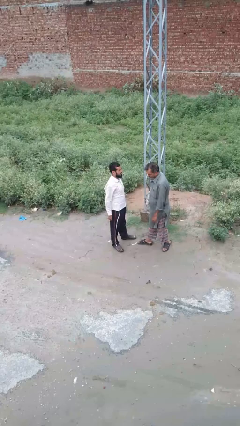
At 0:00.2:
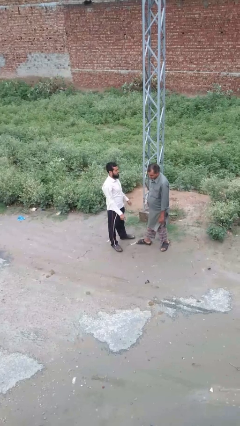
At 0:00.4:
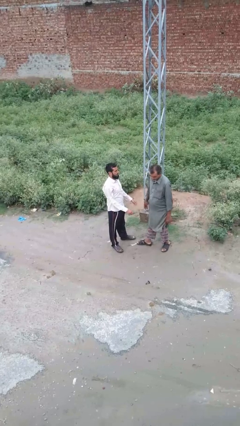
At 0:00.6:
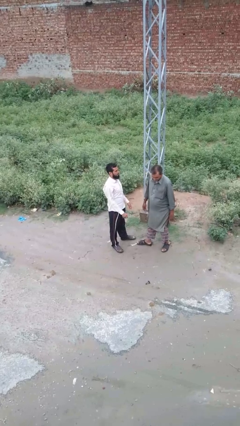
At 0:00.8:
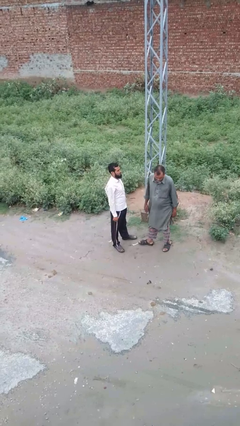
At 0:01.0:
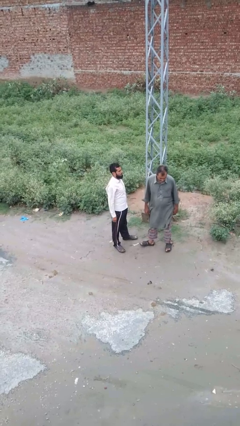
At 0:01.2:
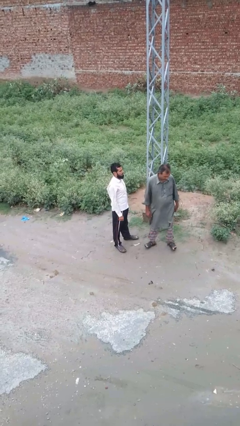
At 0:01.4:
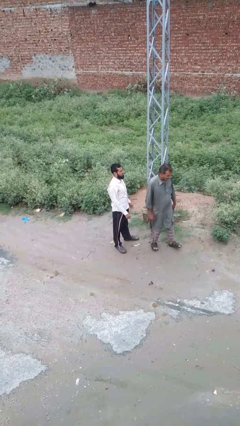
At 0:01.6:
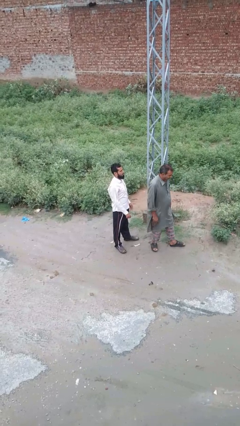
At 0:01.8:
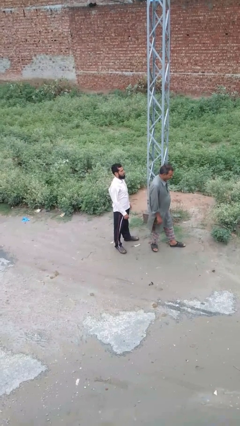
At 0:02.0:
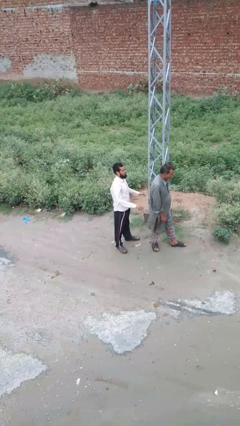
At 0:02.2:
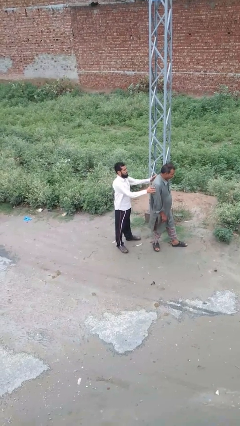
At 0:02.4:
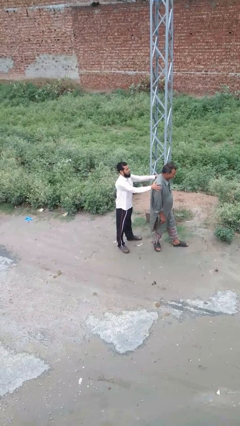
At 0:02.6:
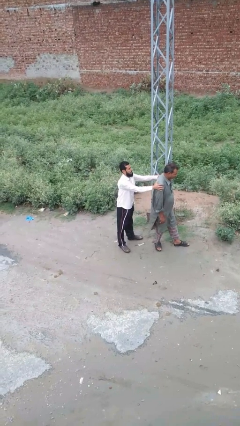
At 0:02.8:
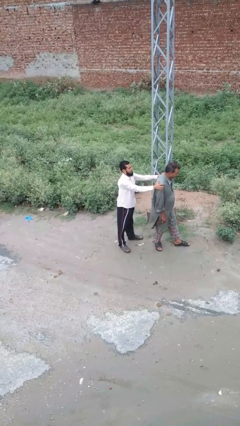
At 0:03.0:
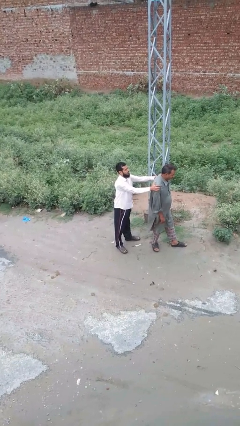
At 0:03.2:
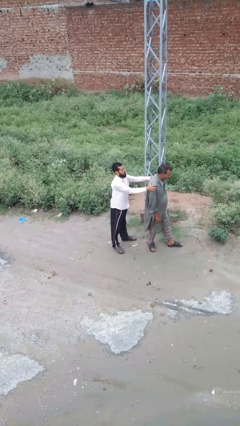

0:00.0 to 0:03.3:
person grabs person by shoulder

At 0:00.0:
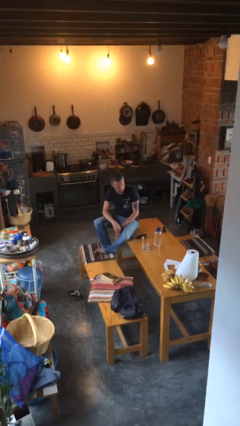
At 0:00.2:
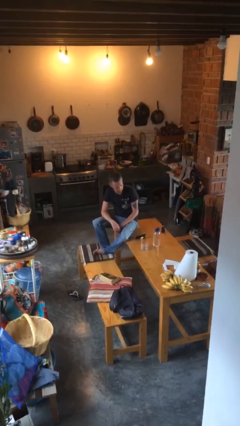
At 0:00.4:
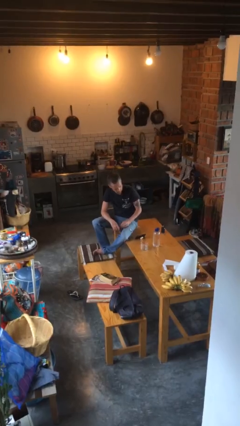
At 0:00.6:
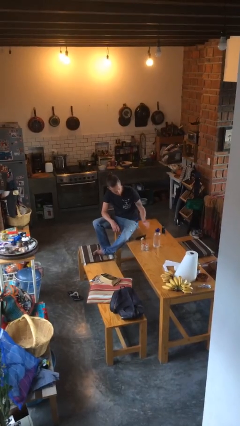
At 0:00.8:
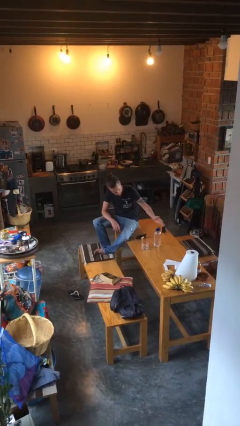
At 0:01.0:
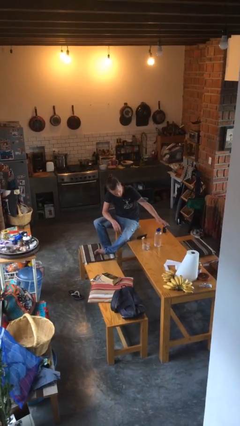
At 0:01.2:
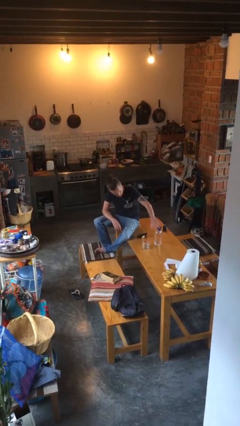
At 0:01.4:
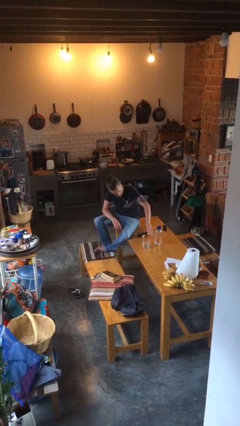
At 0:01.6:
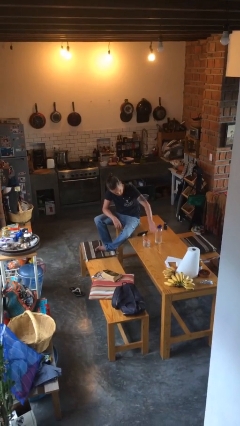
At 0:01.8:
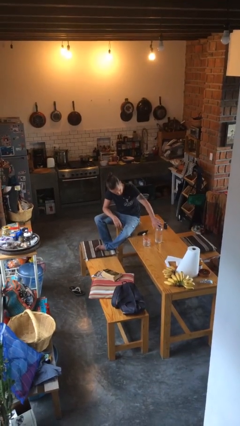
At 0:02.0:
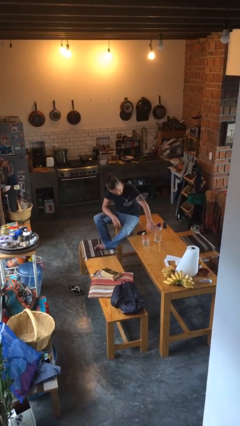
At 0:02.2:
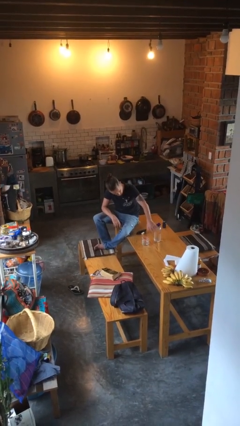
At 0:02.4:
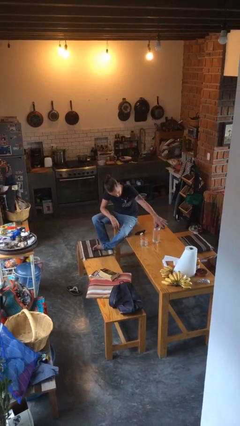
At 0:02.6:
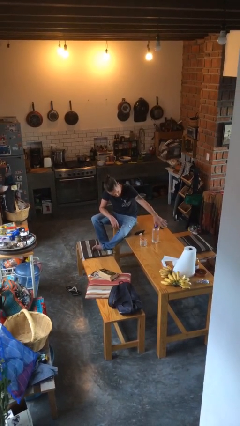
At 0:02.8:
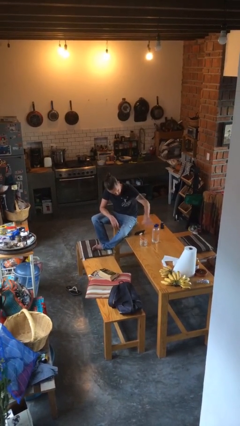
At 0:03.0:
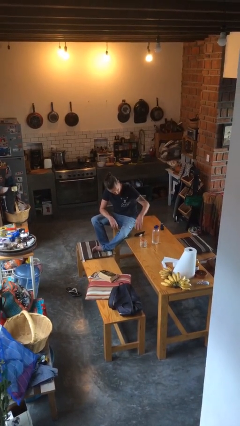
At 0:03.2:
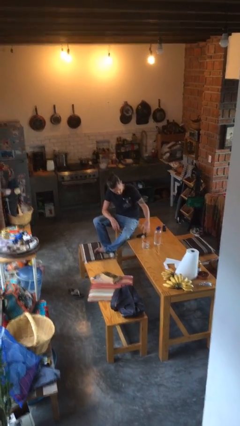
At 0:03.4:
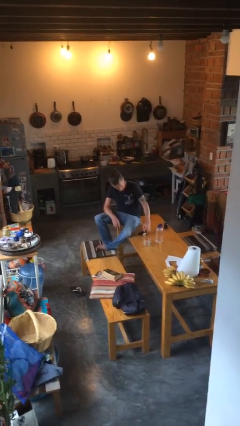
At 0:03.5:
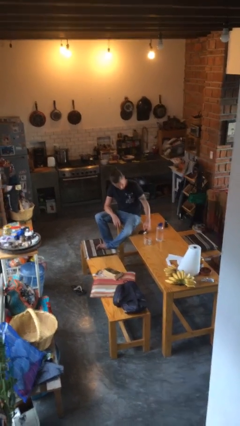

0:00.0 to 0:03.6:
person waves hand over object

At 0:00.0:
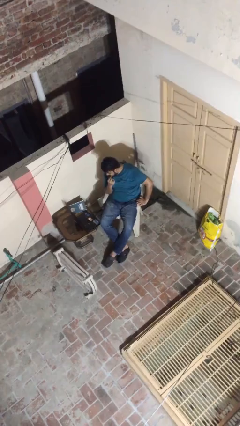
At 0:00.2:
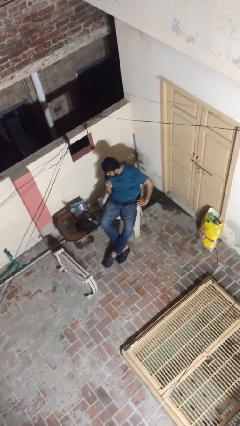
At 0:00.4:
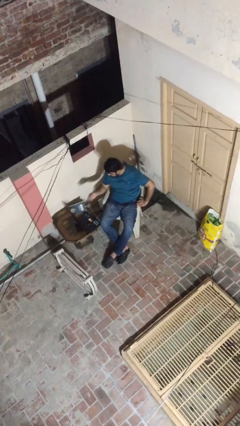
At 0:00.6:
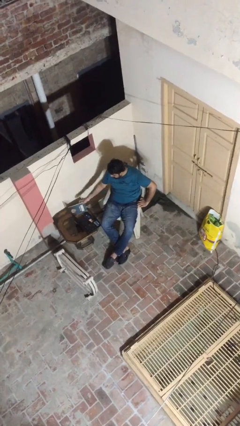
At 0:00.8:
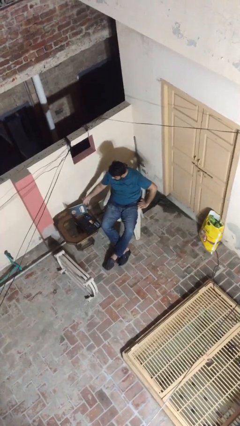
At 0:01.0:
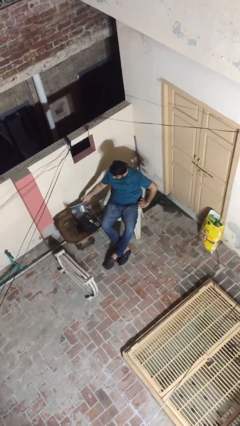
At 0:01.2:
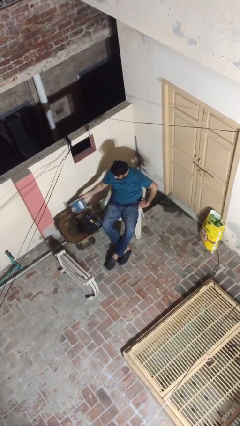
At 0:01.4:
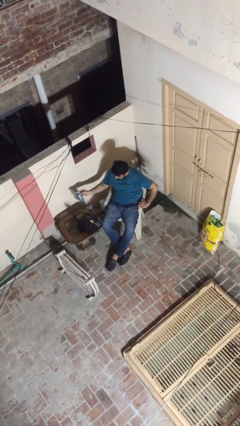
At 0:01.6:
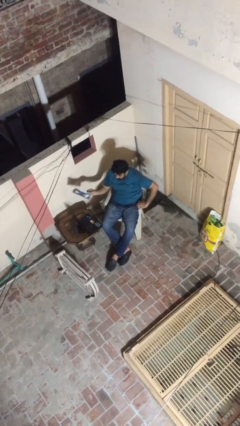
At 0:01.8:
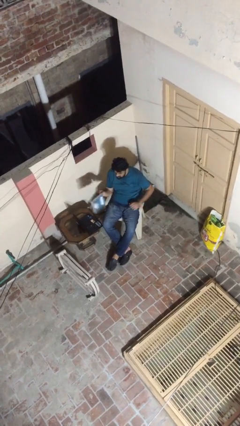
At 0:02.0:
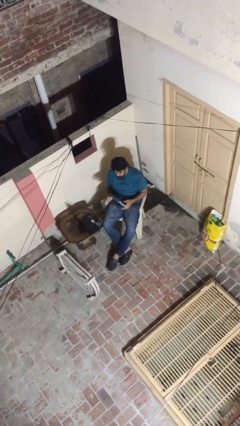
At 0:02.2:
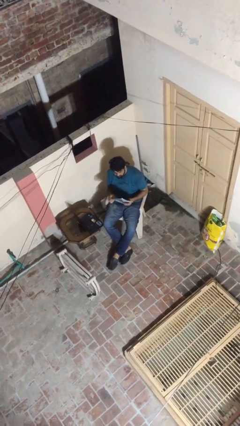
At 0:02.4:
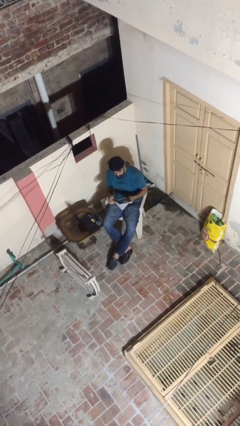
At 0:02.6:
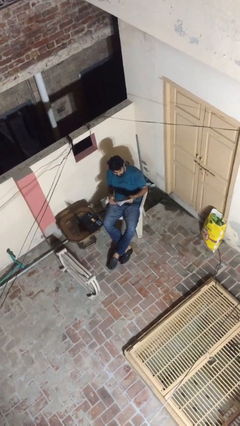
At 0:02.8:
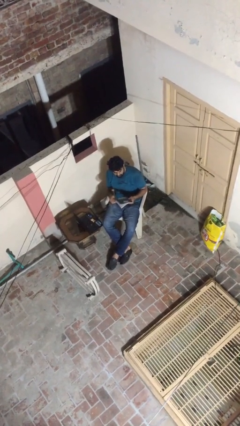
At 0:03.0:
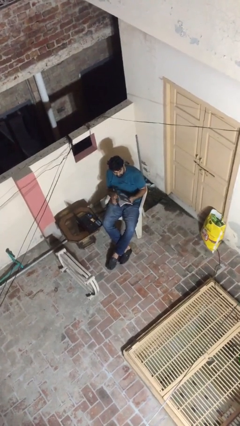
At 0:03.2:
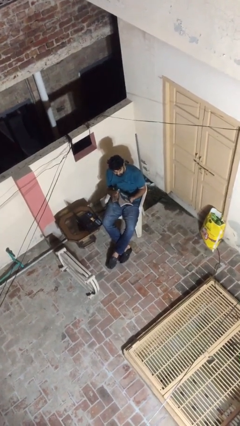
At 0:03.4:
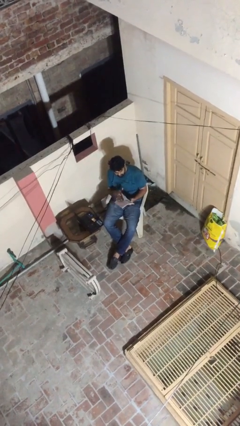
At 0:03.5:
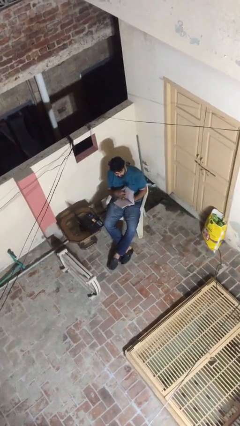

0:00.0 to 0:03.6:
person picks up object from table

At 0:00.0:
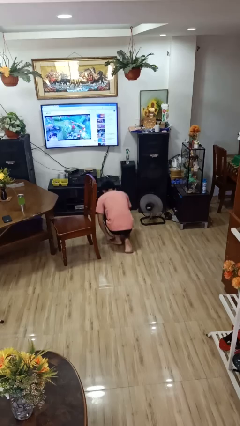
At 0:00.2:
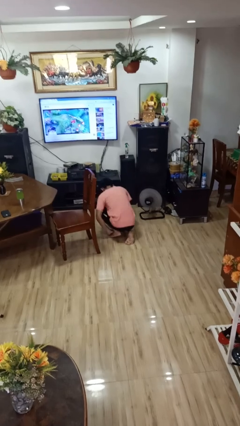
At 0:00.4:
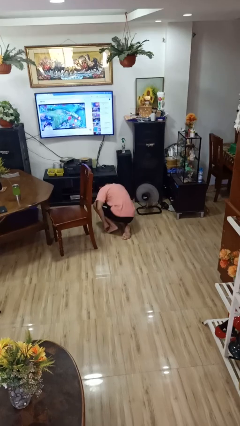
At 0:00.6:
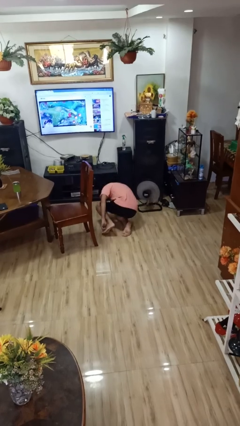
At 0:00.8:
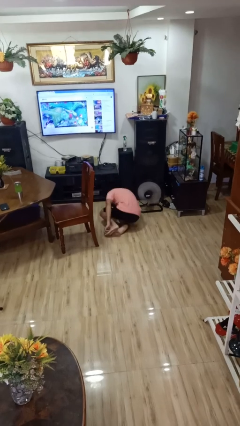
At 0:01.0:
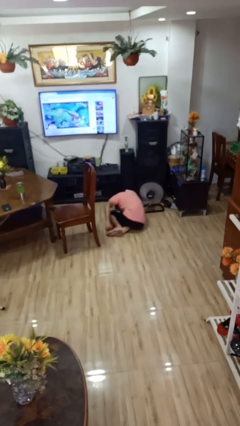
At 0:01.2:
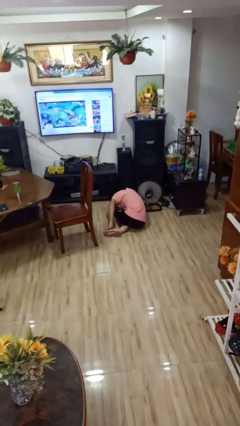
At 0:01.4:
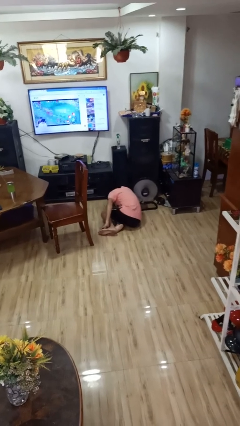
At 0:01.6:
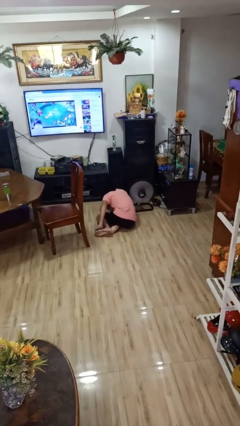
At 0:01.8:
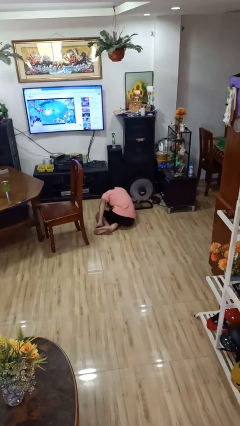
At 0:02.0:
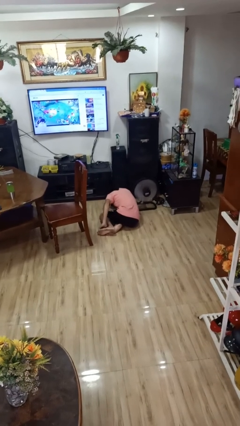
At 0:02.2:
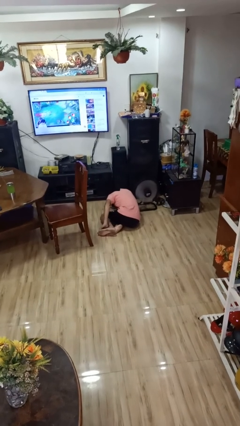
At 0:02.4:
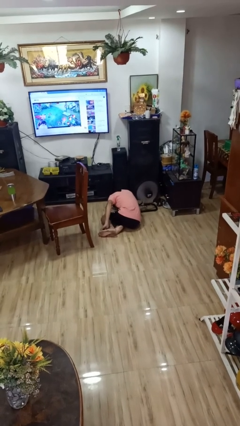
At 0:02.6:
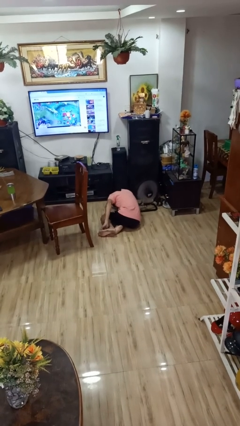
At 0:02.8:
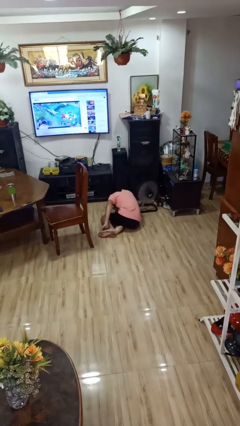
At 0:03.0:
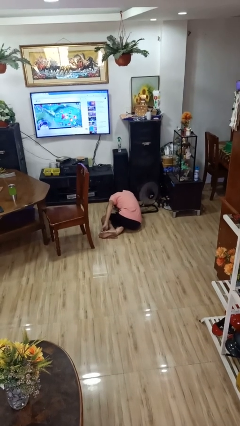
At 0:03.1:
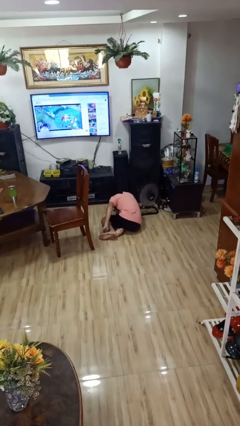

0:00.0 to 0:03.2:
person lies down on floor

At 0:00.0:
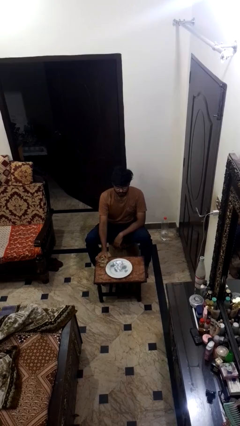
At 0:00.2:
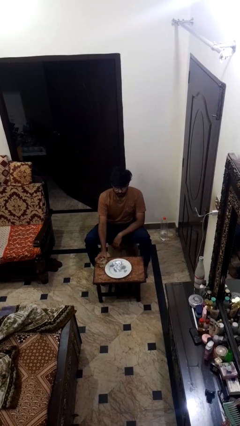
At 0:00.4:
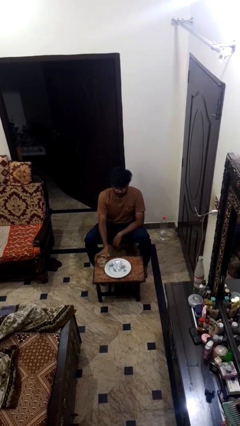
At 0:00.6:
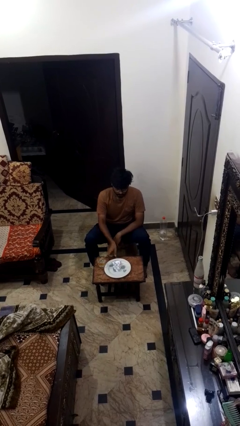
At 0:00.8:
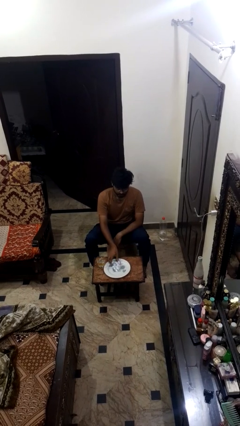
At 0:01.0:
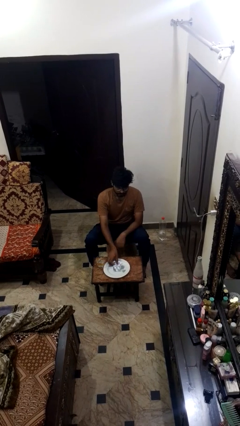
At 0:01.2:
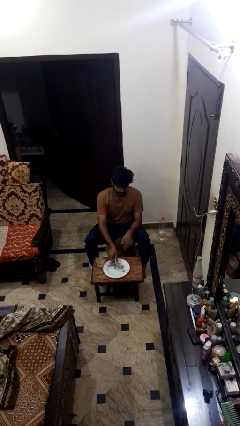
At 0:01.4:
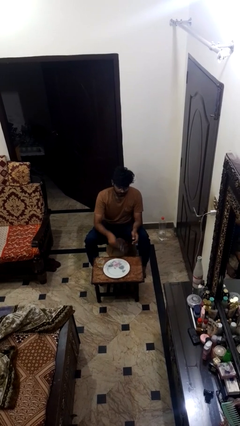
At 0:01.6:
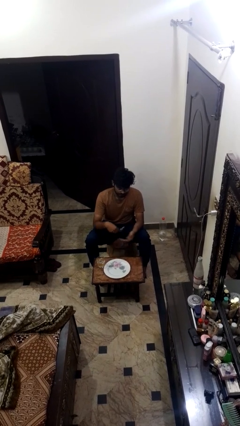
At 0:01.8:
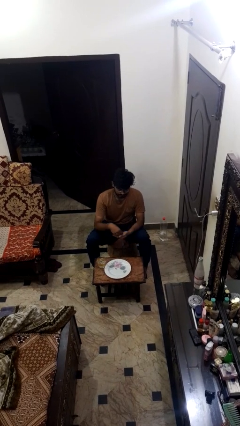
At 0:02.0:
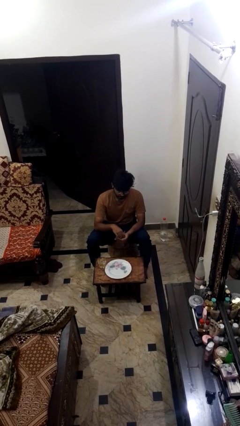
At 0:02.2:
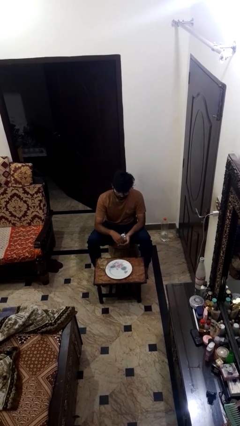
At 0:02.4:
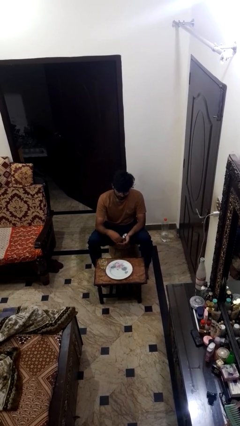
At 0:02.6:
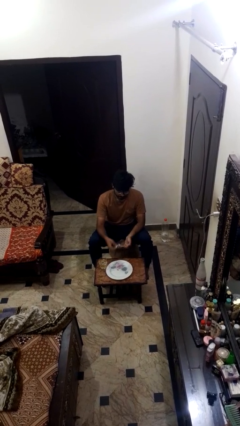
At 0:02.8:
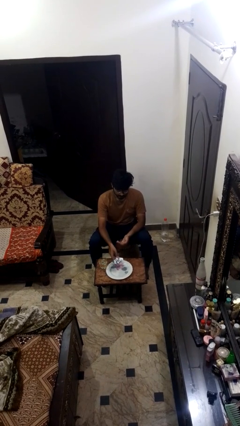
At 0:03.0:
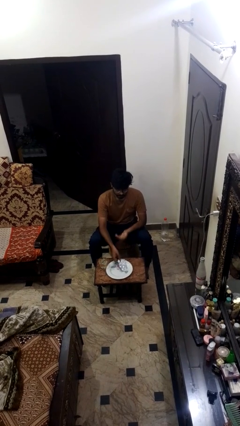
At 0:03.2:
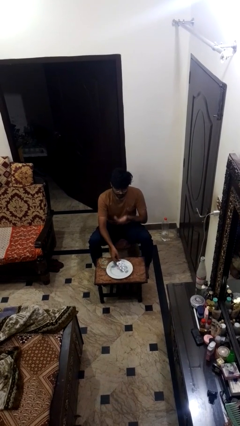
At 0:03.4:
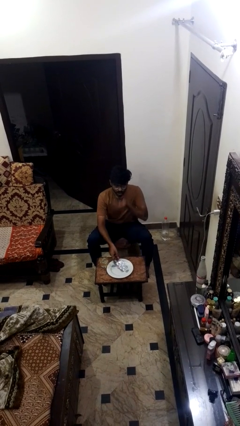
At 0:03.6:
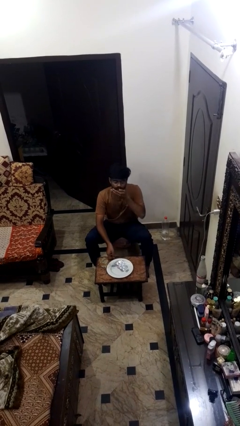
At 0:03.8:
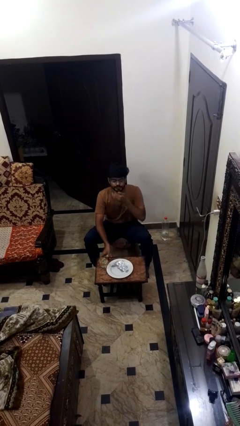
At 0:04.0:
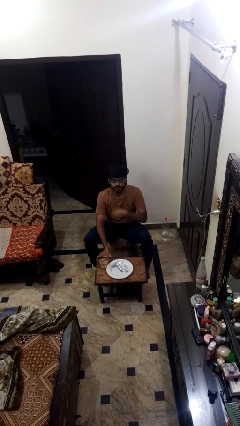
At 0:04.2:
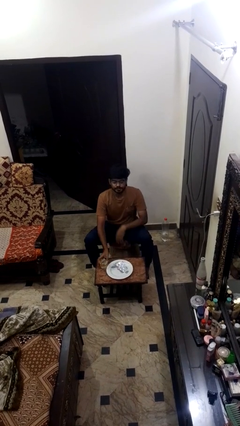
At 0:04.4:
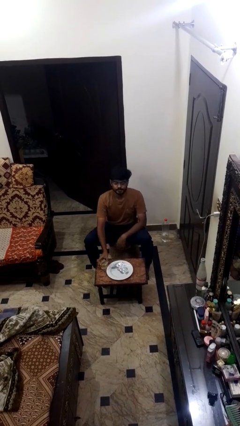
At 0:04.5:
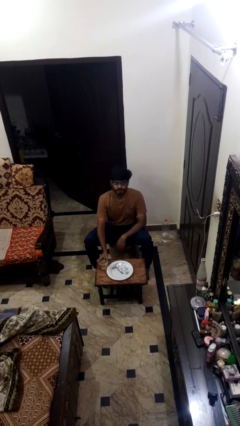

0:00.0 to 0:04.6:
person takes medicine pills
